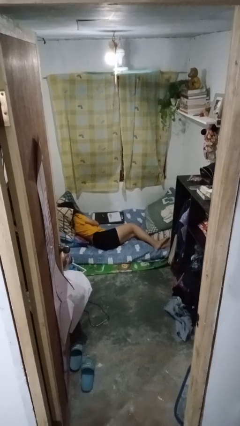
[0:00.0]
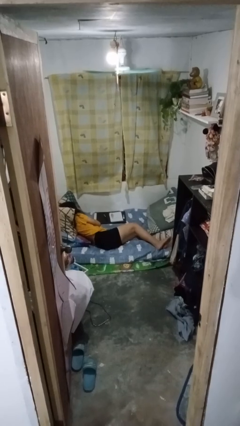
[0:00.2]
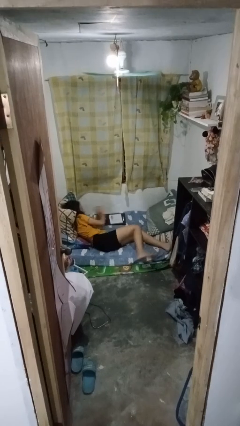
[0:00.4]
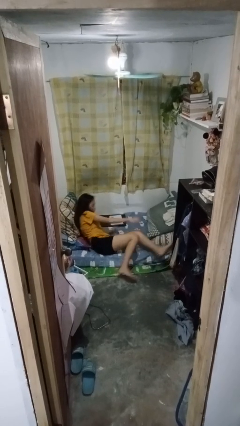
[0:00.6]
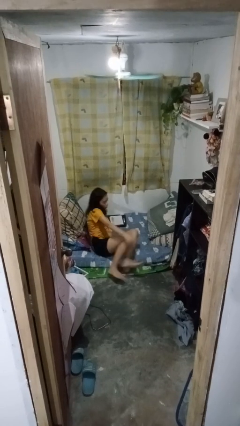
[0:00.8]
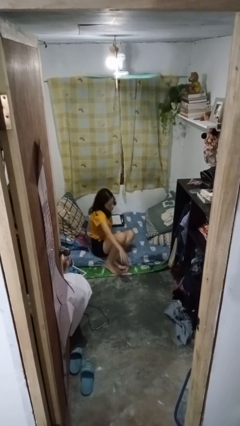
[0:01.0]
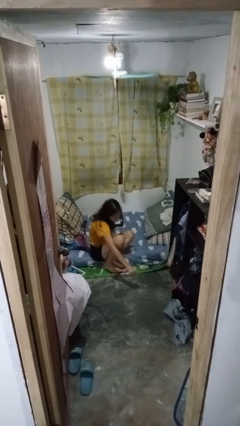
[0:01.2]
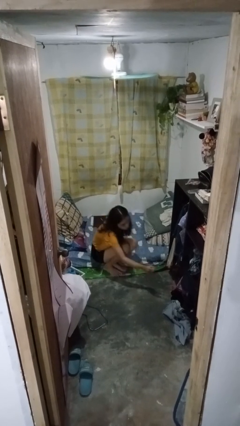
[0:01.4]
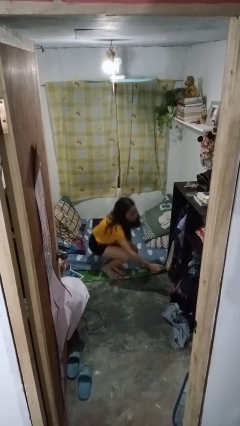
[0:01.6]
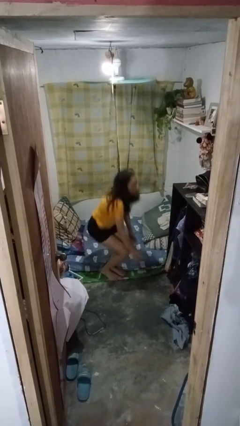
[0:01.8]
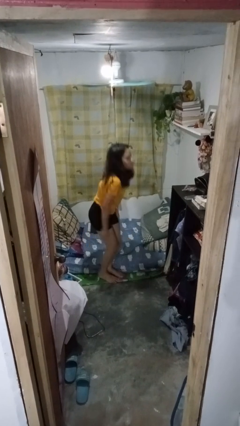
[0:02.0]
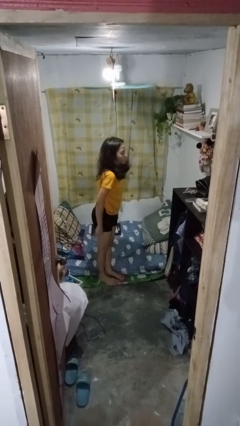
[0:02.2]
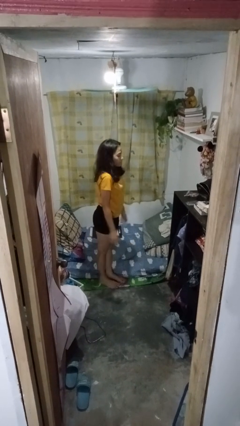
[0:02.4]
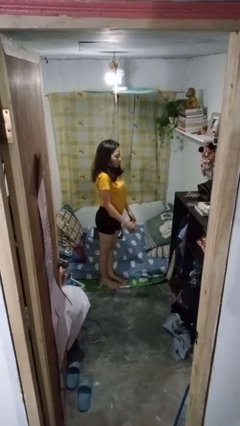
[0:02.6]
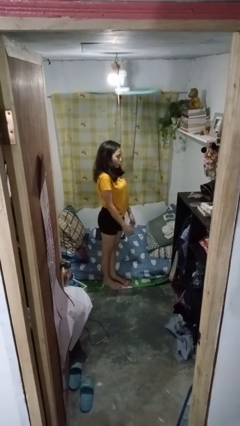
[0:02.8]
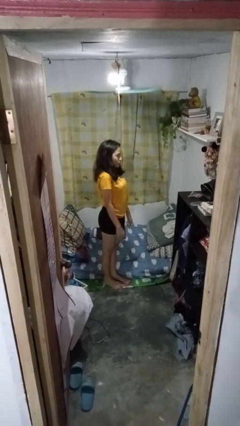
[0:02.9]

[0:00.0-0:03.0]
person stands up

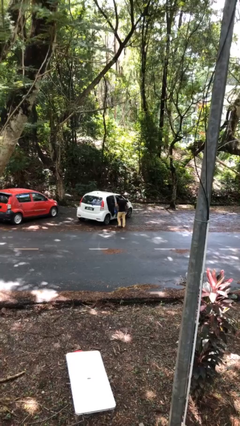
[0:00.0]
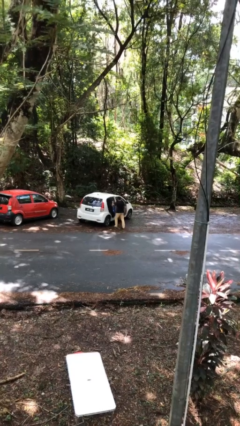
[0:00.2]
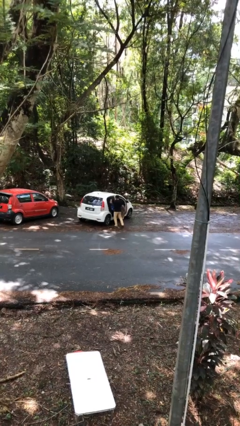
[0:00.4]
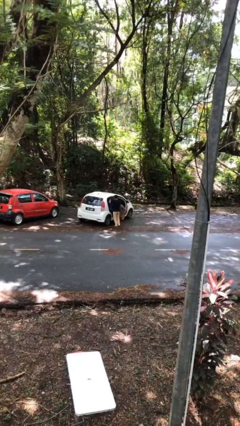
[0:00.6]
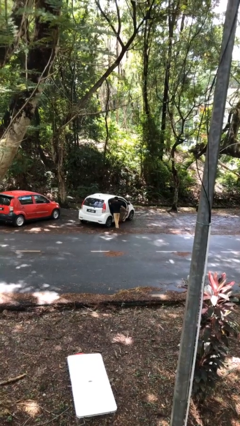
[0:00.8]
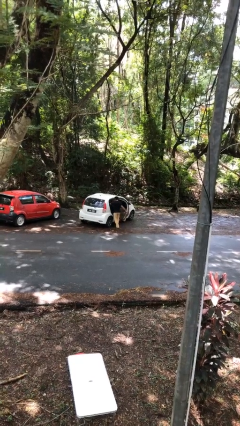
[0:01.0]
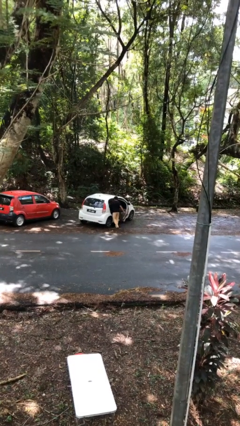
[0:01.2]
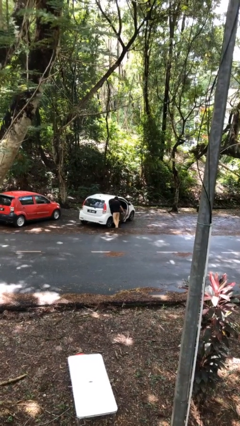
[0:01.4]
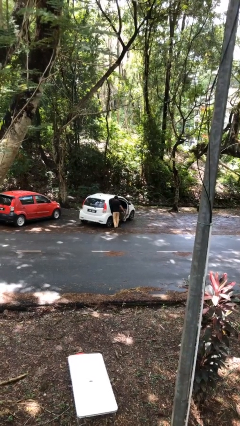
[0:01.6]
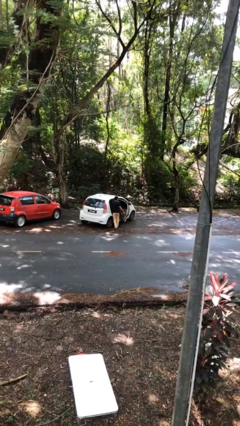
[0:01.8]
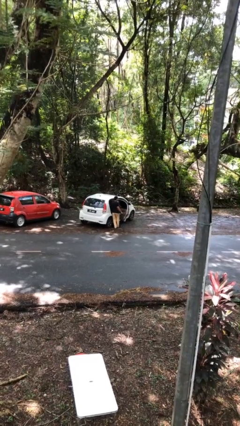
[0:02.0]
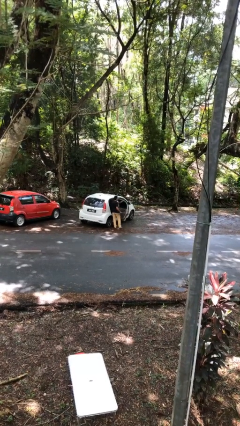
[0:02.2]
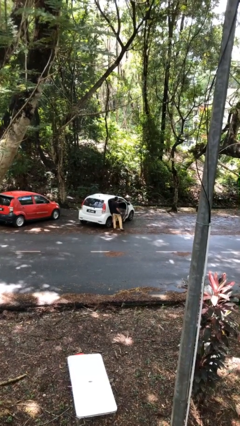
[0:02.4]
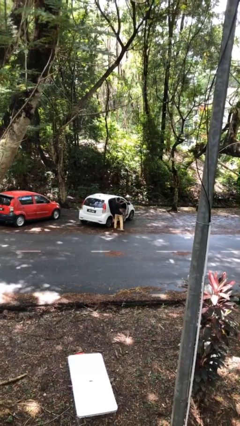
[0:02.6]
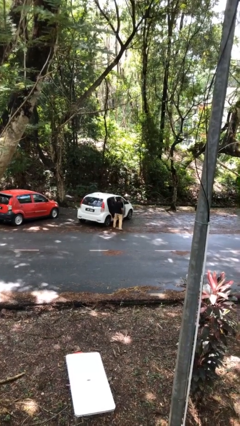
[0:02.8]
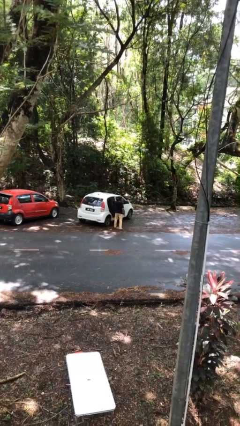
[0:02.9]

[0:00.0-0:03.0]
person loads car

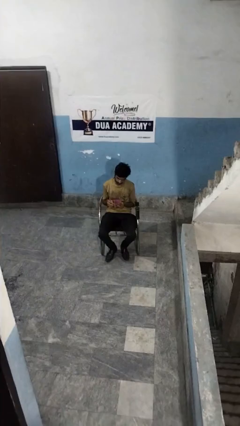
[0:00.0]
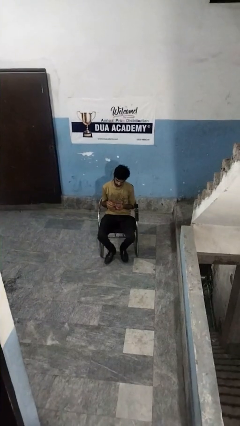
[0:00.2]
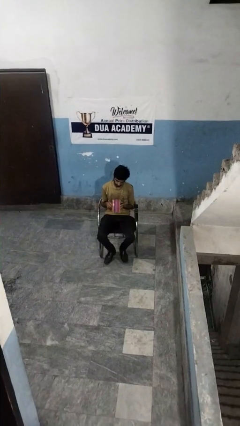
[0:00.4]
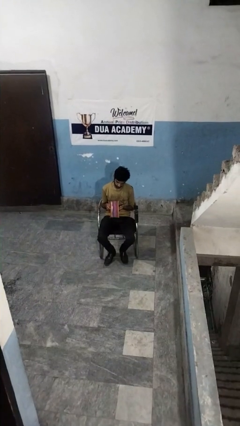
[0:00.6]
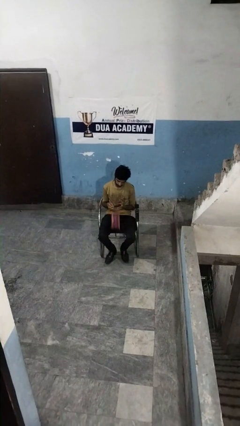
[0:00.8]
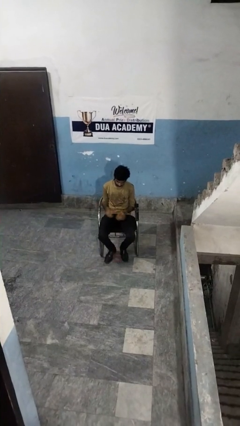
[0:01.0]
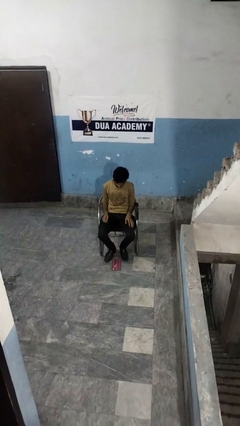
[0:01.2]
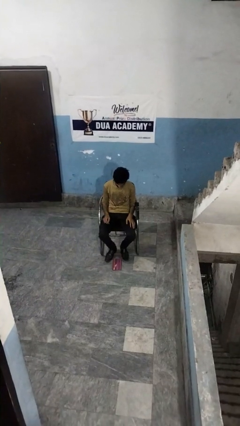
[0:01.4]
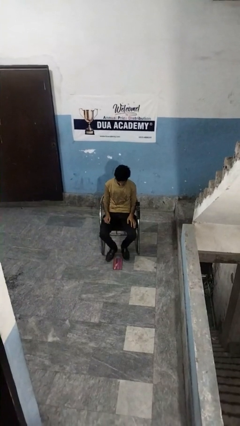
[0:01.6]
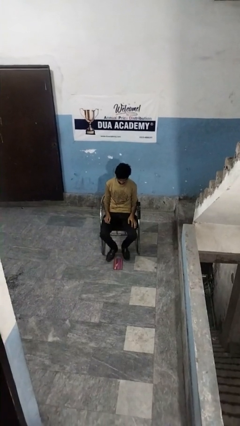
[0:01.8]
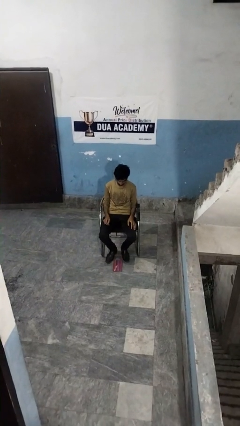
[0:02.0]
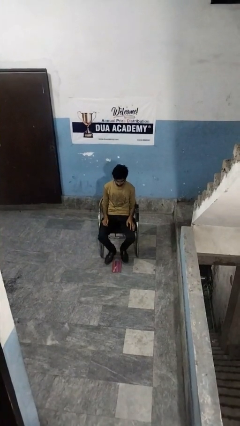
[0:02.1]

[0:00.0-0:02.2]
person drops object

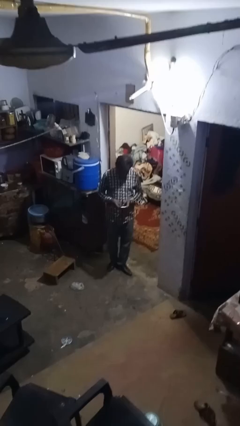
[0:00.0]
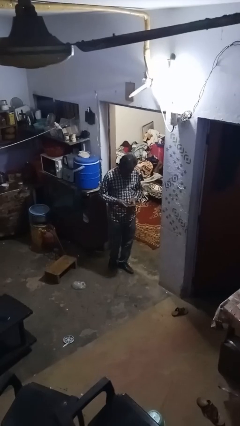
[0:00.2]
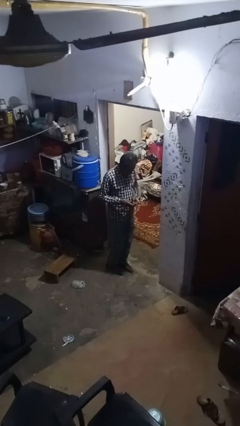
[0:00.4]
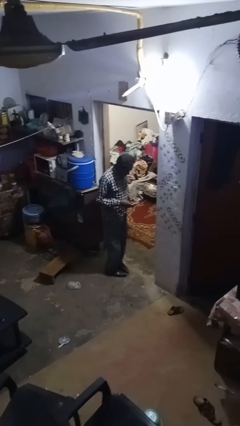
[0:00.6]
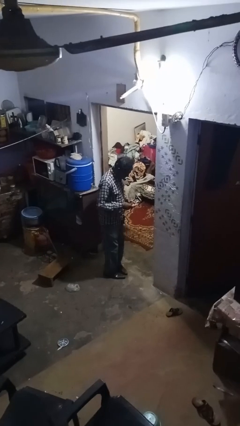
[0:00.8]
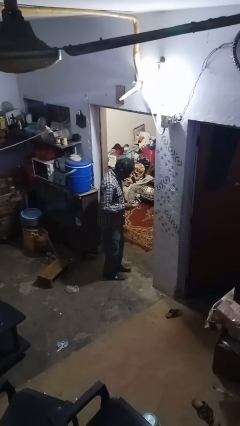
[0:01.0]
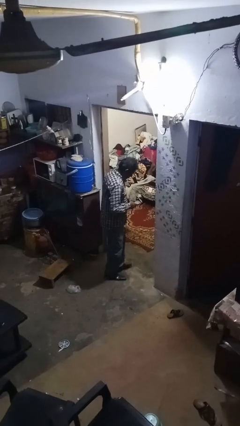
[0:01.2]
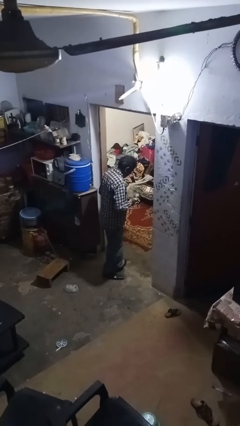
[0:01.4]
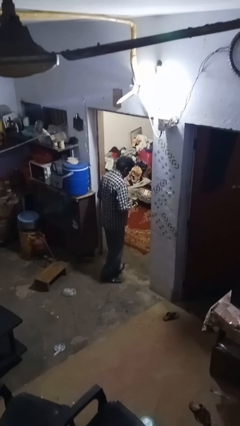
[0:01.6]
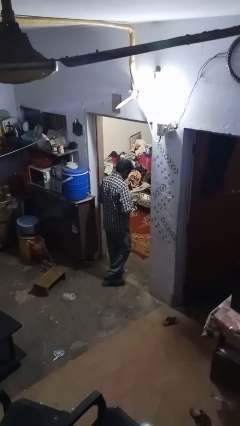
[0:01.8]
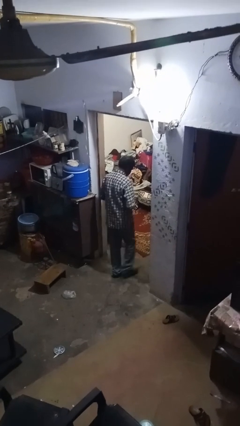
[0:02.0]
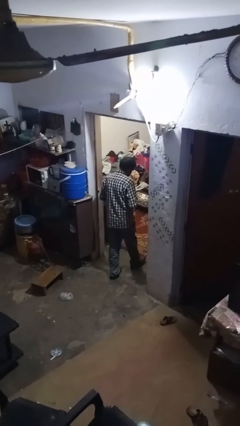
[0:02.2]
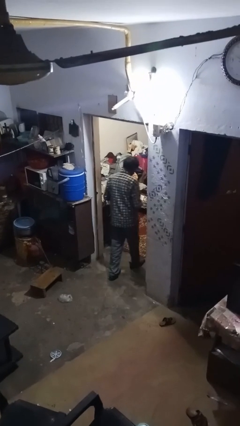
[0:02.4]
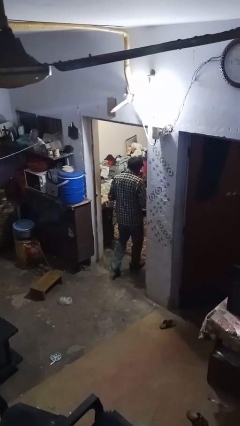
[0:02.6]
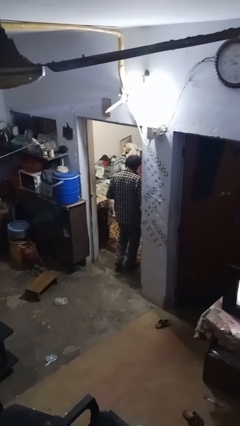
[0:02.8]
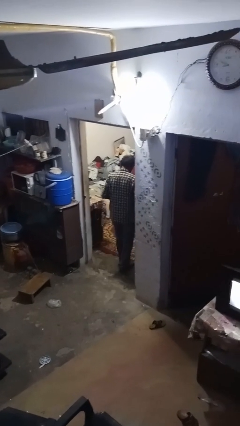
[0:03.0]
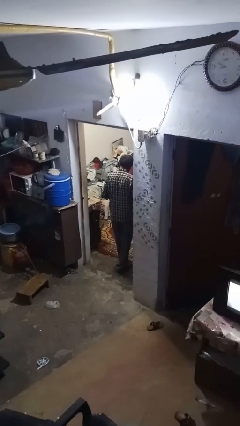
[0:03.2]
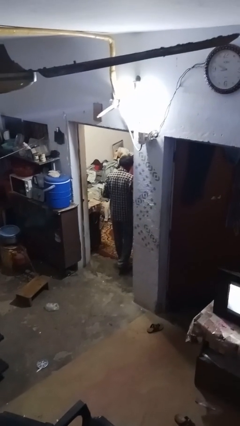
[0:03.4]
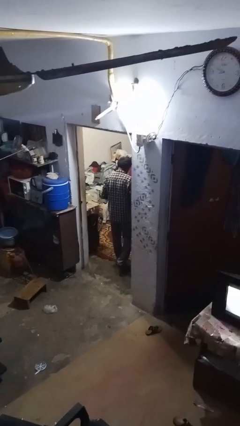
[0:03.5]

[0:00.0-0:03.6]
person exits scene through structure

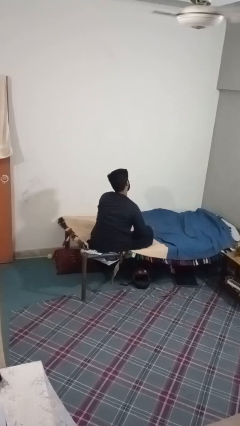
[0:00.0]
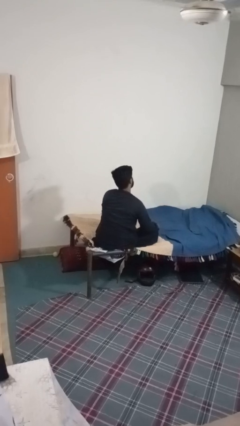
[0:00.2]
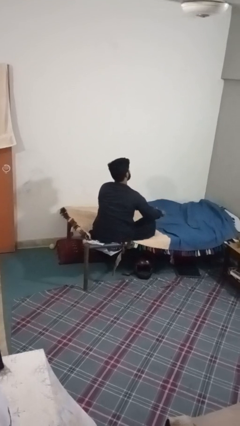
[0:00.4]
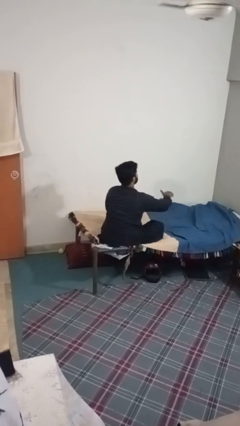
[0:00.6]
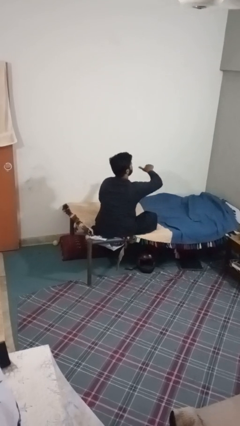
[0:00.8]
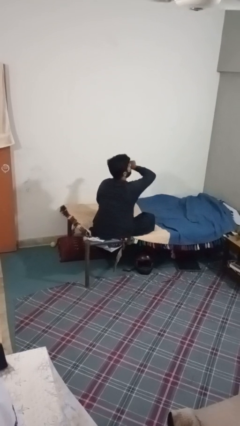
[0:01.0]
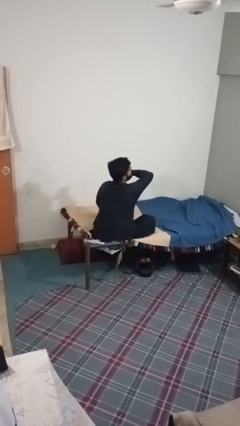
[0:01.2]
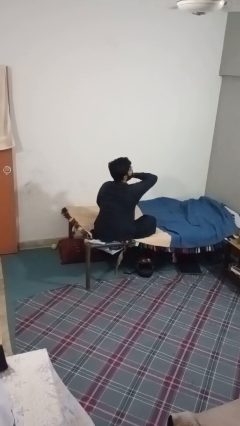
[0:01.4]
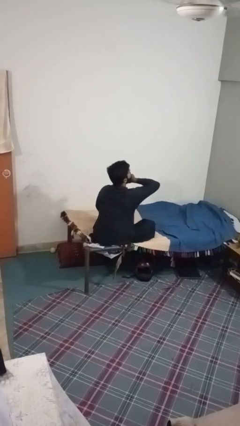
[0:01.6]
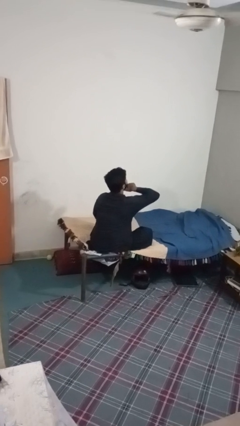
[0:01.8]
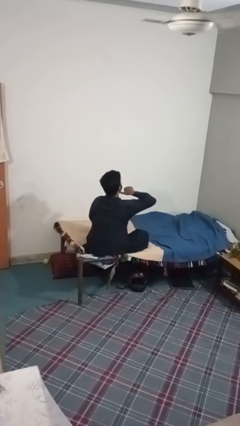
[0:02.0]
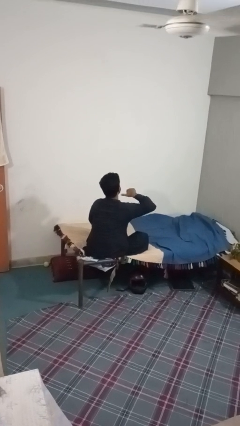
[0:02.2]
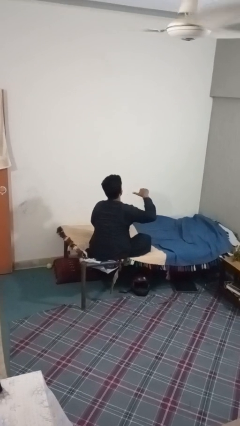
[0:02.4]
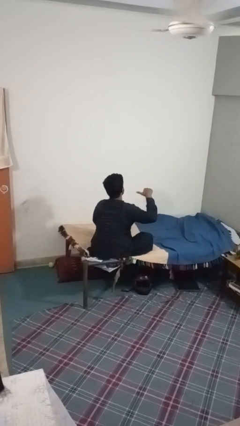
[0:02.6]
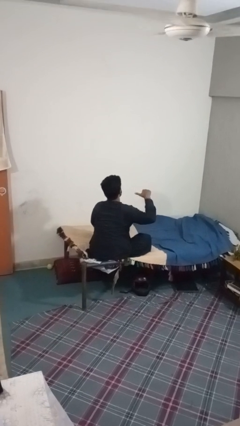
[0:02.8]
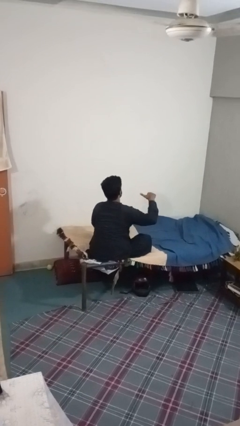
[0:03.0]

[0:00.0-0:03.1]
person gestures cut

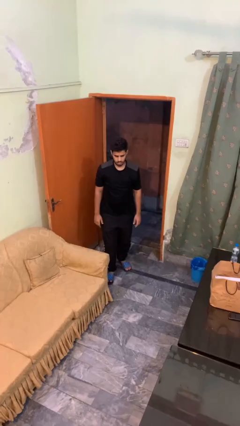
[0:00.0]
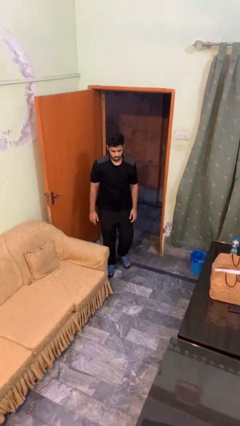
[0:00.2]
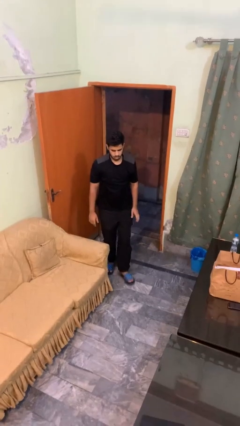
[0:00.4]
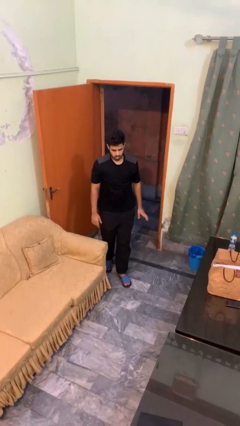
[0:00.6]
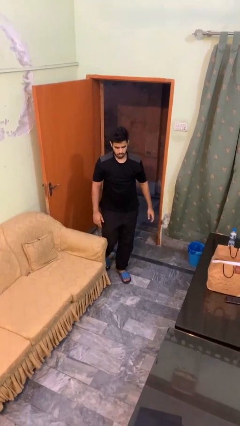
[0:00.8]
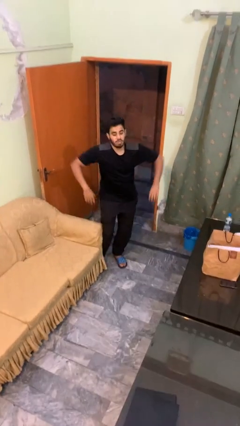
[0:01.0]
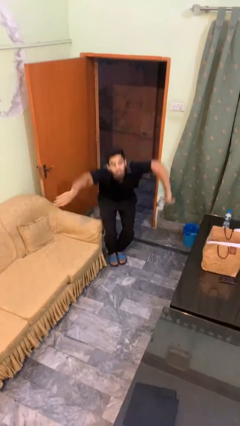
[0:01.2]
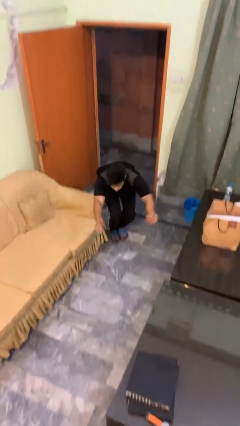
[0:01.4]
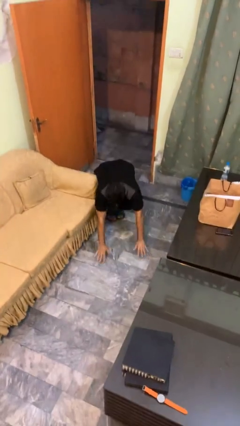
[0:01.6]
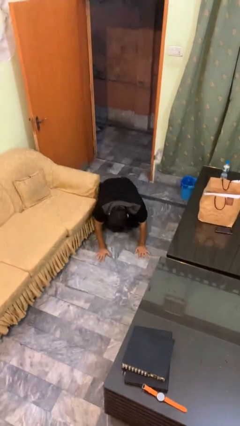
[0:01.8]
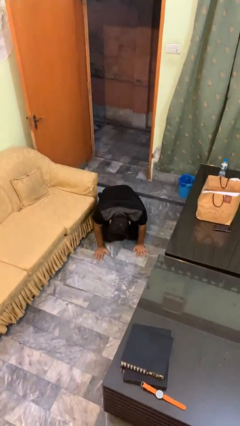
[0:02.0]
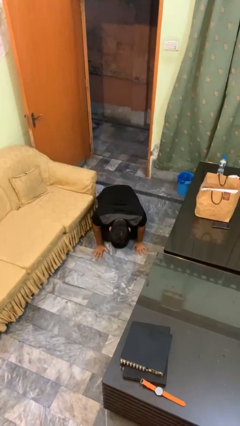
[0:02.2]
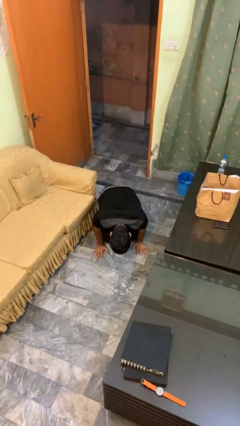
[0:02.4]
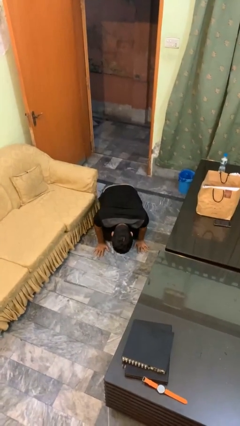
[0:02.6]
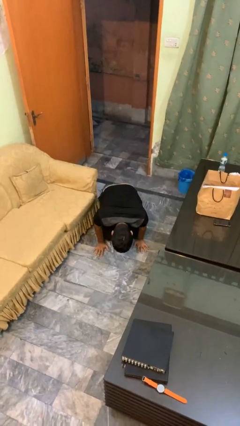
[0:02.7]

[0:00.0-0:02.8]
person trips on object on floor
